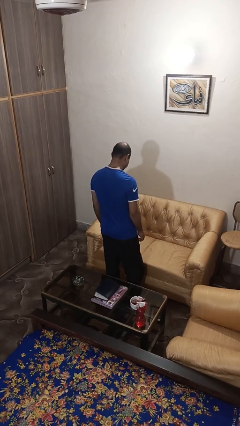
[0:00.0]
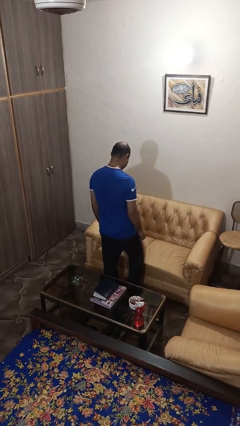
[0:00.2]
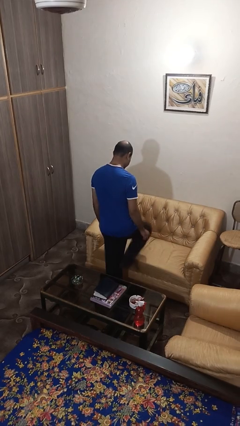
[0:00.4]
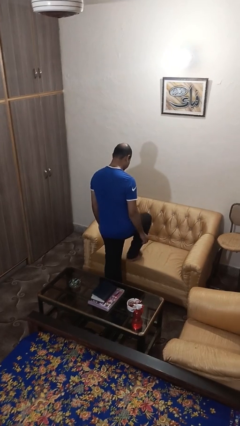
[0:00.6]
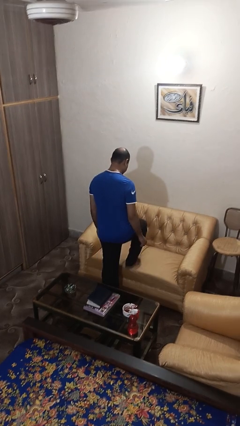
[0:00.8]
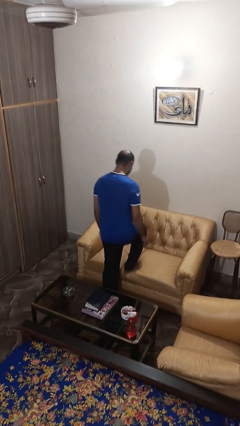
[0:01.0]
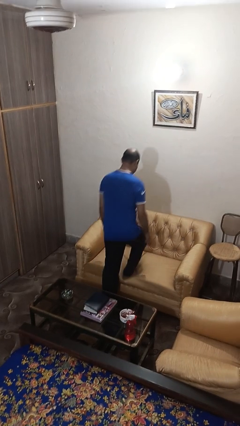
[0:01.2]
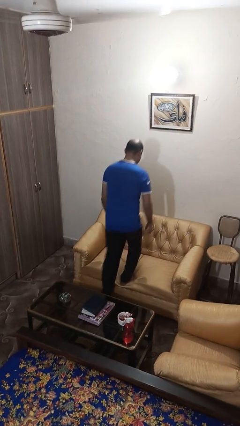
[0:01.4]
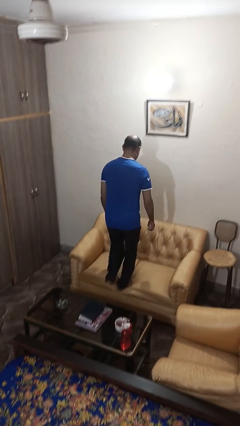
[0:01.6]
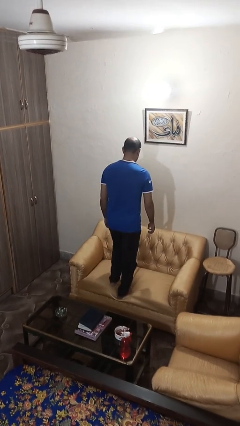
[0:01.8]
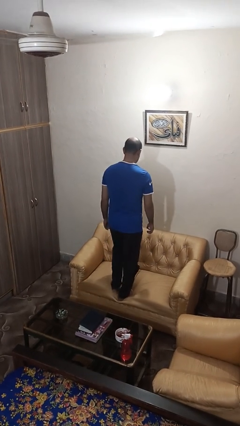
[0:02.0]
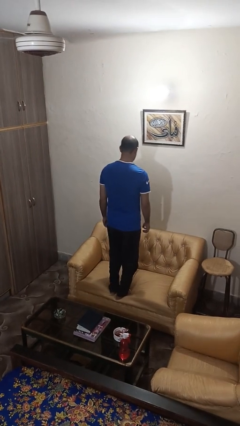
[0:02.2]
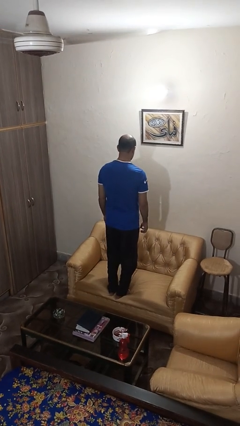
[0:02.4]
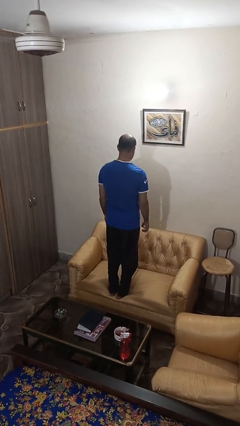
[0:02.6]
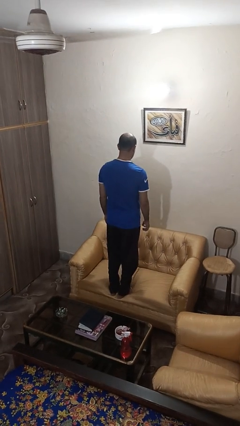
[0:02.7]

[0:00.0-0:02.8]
person climbs on couch

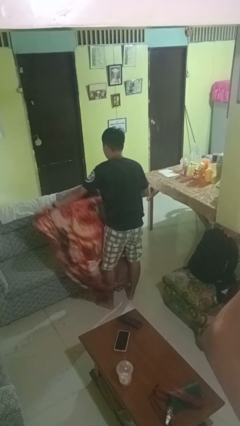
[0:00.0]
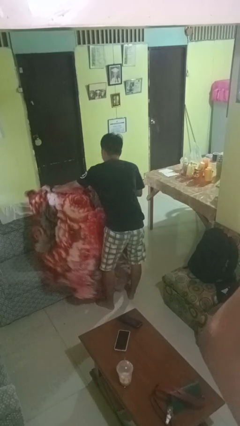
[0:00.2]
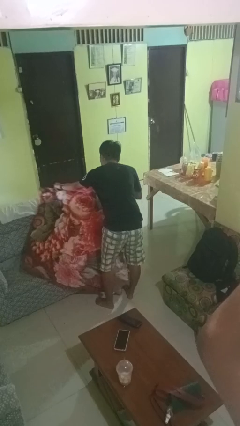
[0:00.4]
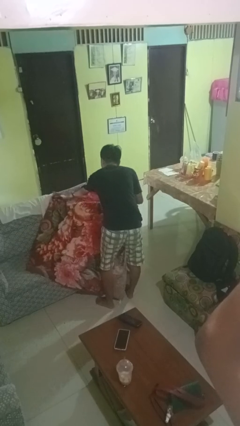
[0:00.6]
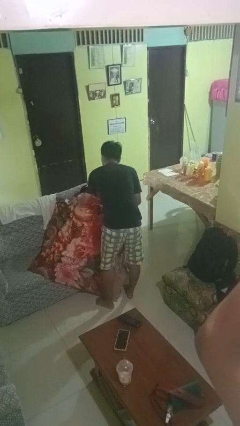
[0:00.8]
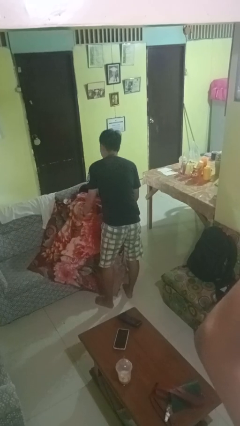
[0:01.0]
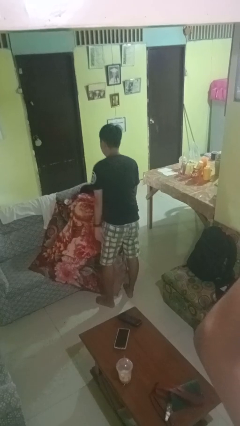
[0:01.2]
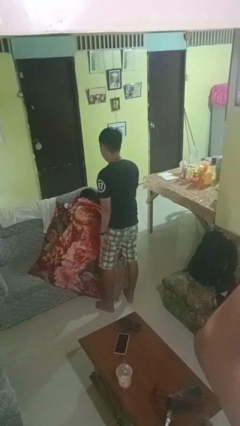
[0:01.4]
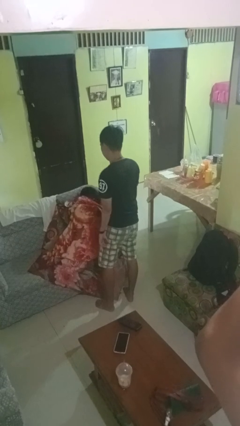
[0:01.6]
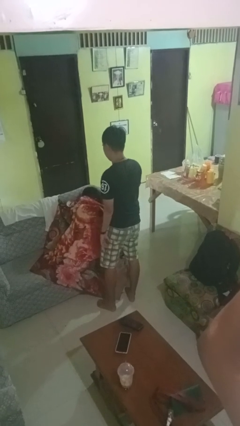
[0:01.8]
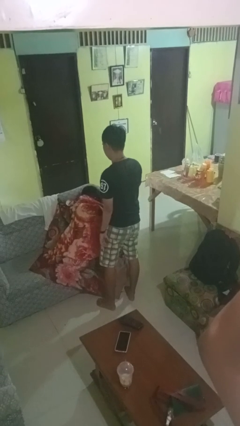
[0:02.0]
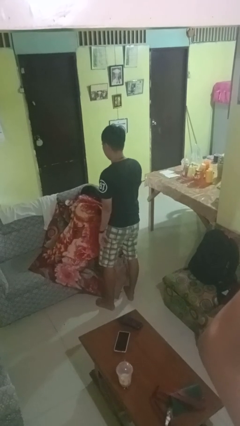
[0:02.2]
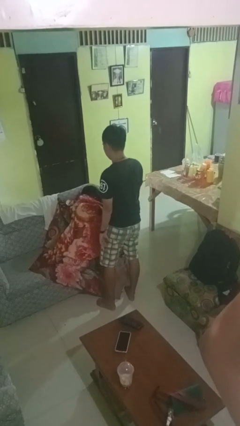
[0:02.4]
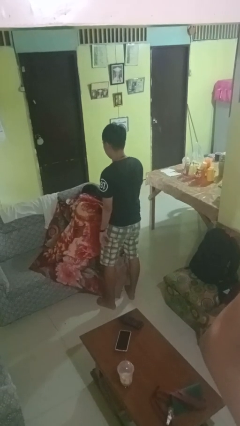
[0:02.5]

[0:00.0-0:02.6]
person covers friend with blanket

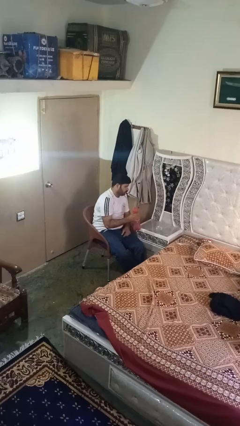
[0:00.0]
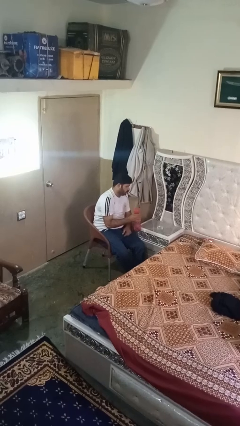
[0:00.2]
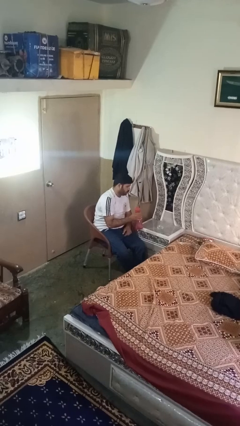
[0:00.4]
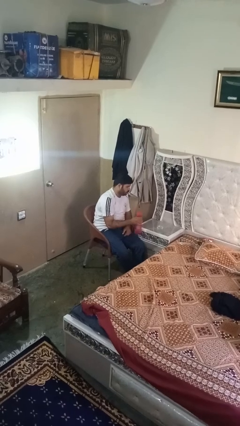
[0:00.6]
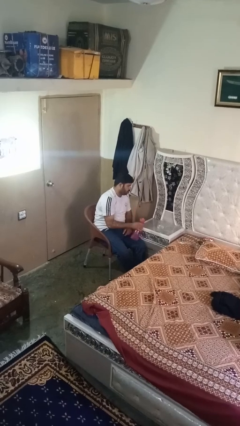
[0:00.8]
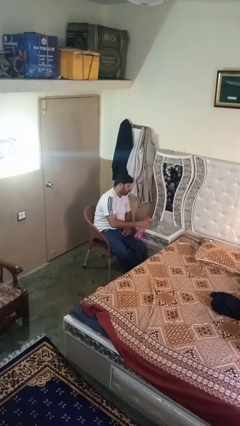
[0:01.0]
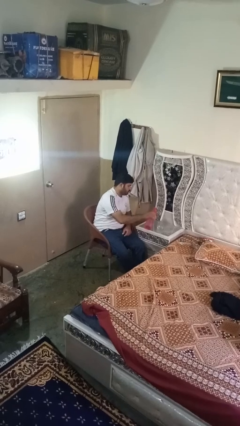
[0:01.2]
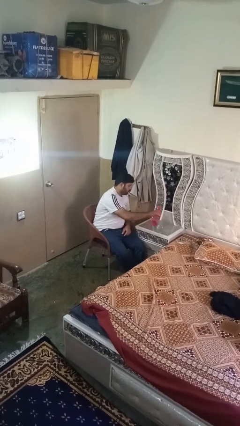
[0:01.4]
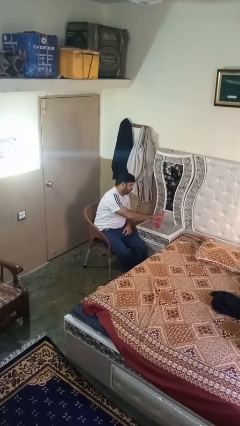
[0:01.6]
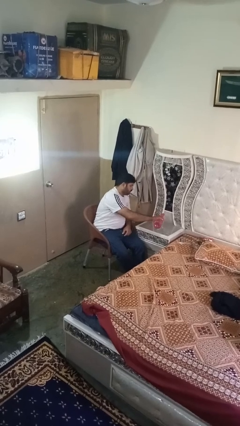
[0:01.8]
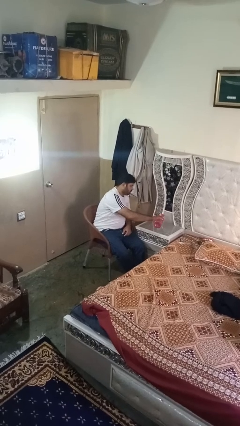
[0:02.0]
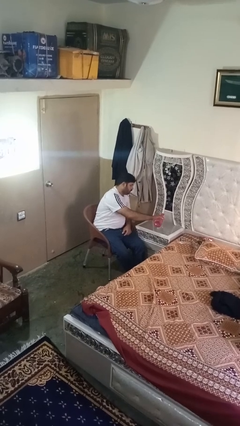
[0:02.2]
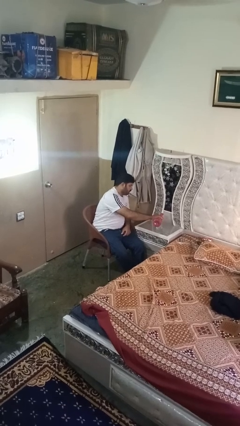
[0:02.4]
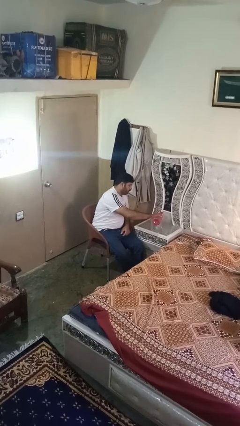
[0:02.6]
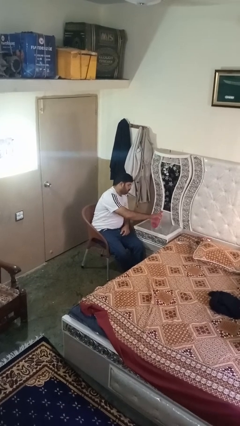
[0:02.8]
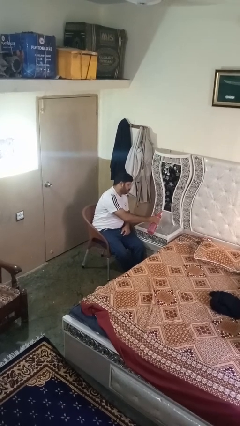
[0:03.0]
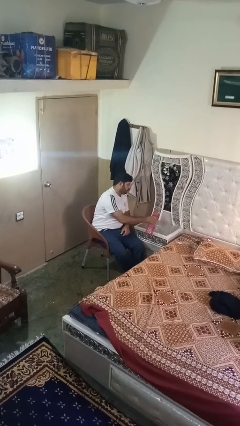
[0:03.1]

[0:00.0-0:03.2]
person pours liquid into cup

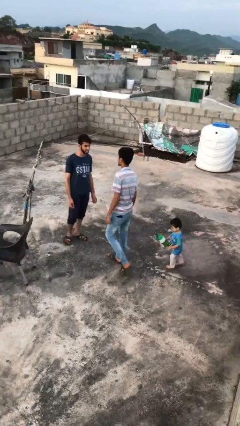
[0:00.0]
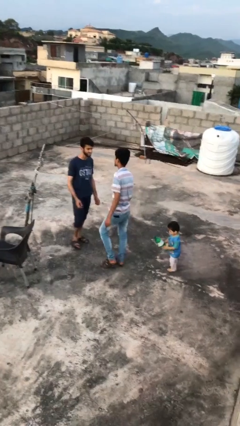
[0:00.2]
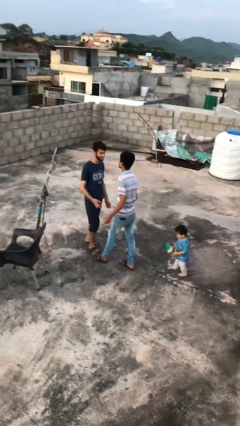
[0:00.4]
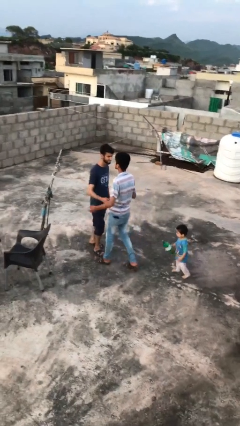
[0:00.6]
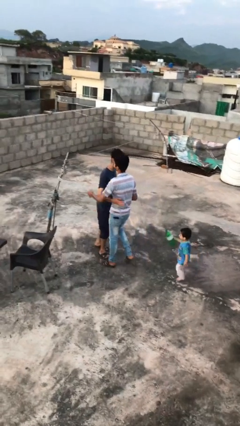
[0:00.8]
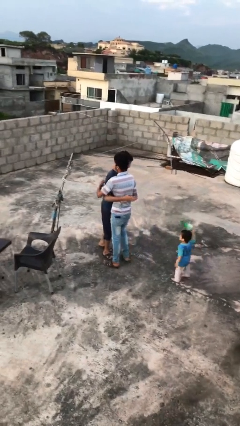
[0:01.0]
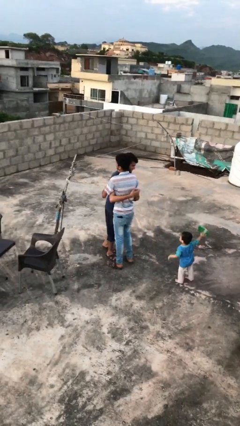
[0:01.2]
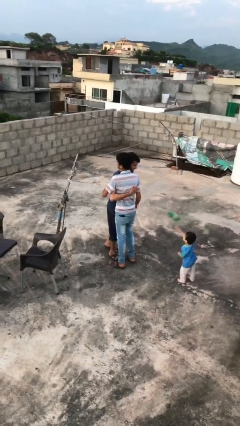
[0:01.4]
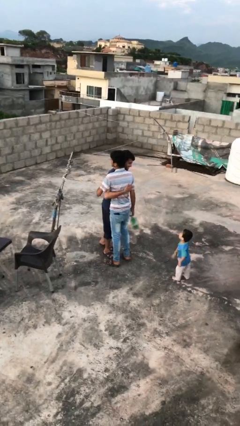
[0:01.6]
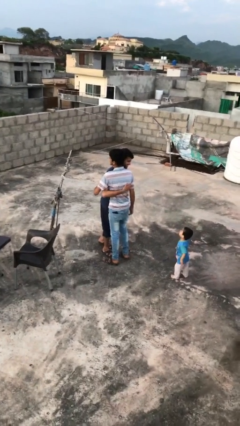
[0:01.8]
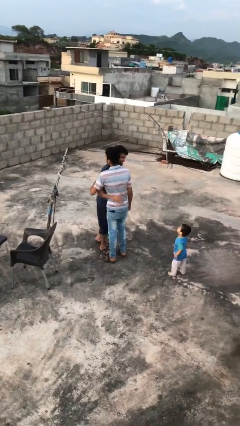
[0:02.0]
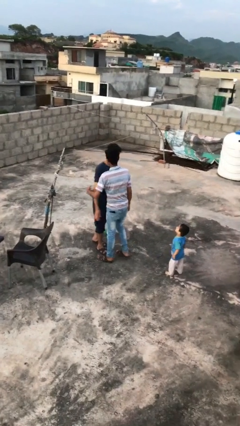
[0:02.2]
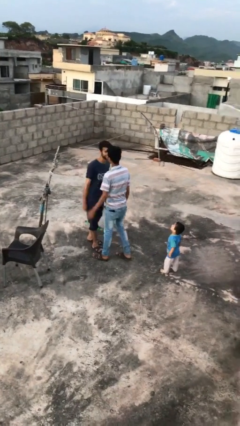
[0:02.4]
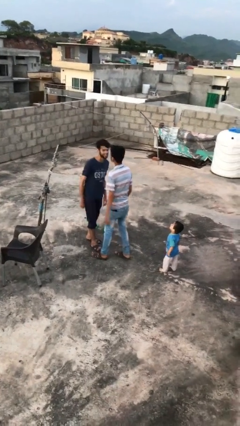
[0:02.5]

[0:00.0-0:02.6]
person embraces person

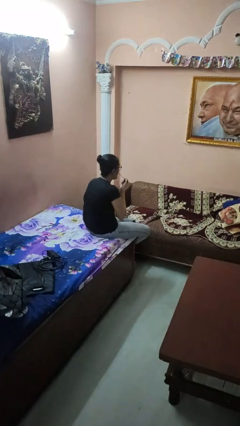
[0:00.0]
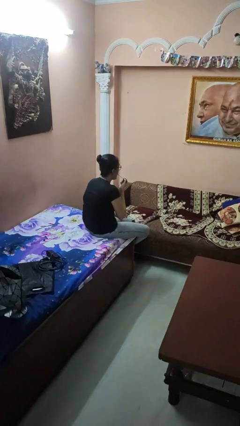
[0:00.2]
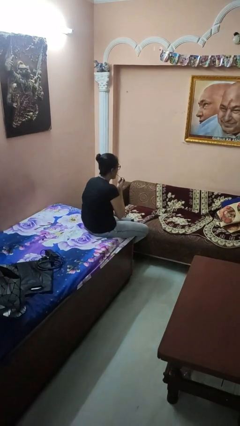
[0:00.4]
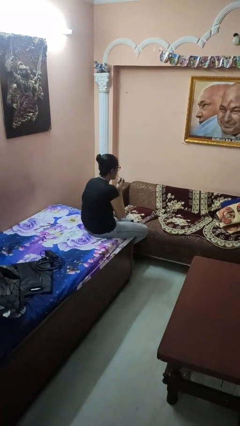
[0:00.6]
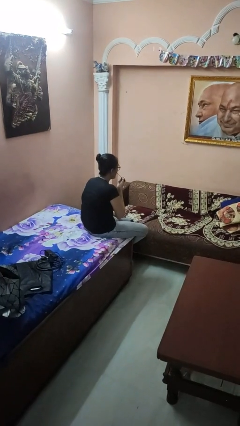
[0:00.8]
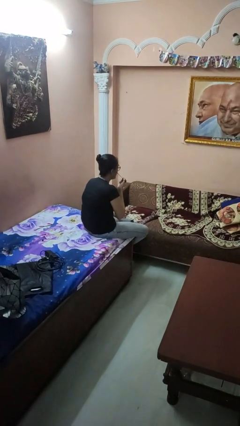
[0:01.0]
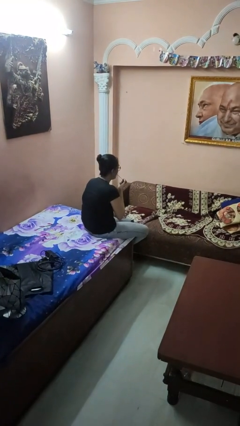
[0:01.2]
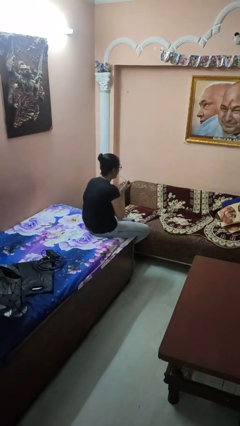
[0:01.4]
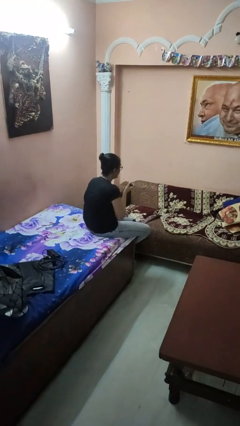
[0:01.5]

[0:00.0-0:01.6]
person applies lip makeup

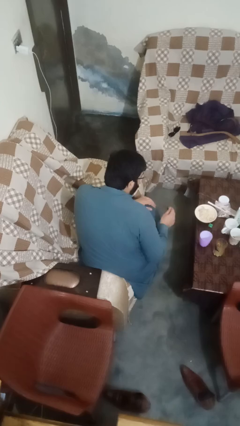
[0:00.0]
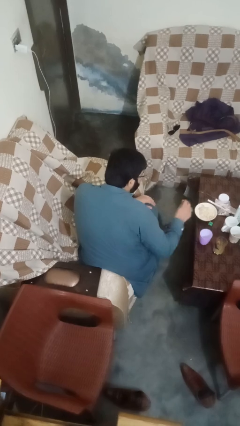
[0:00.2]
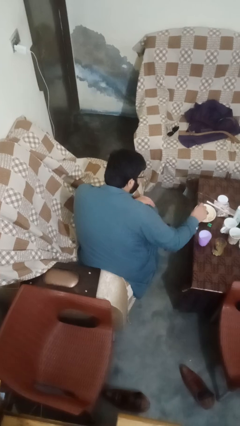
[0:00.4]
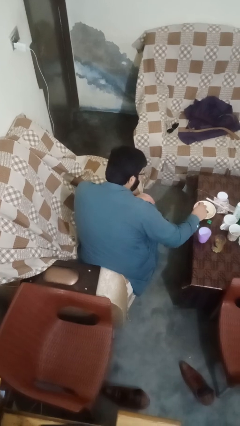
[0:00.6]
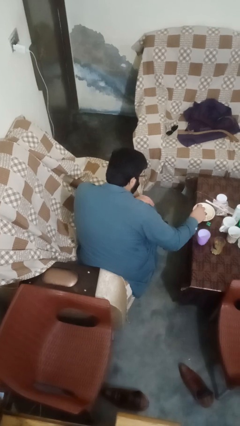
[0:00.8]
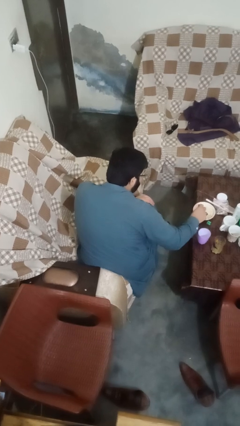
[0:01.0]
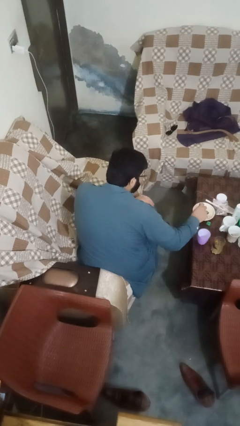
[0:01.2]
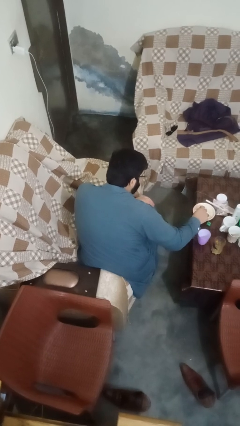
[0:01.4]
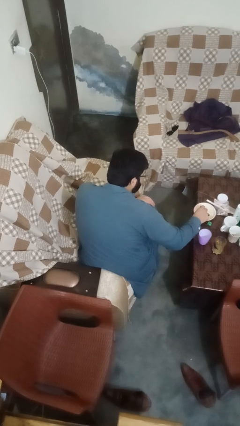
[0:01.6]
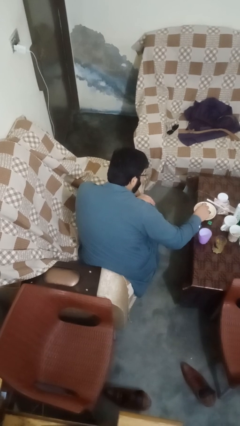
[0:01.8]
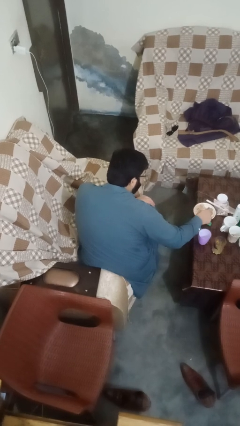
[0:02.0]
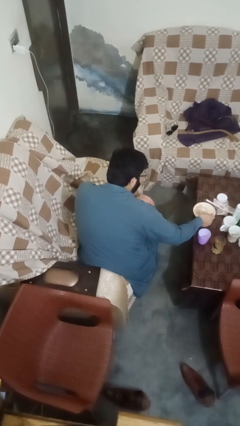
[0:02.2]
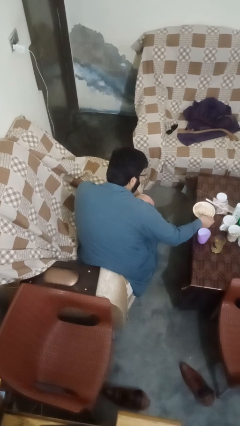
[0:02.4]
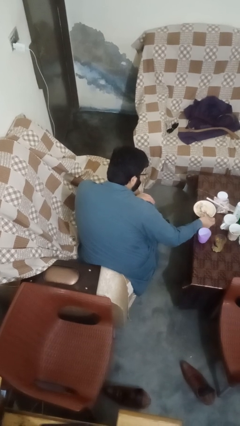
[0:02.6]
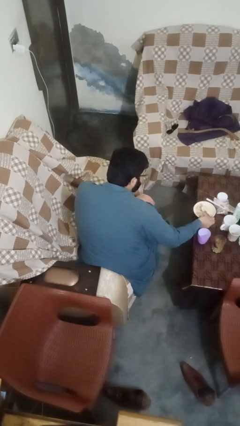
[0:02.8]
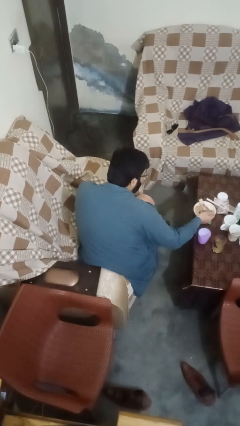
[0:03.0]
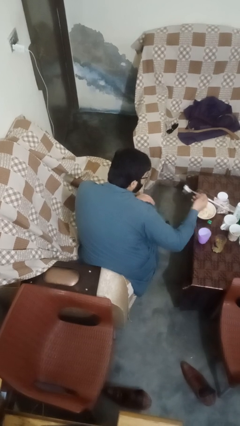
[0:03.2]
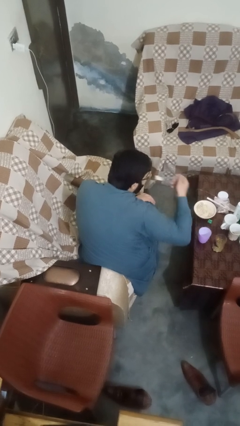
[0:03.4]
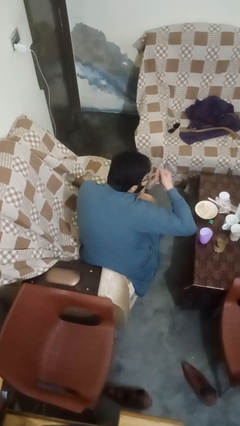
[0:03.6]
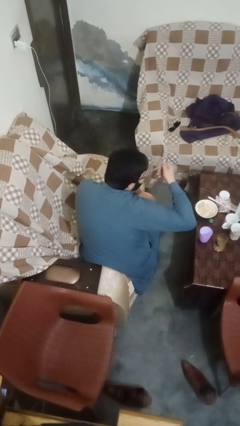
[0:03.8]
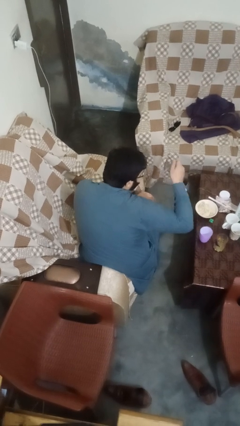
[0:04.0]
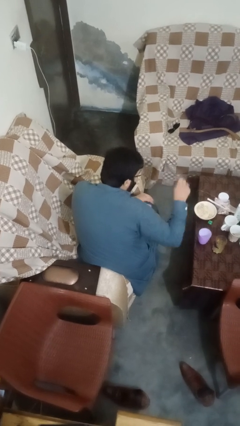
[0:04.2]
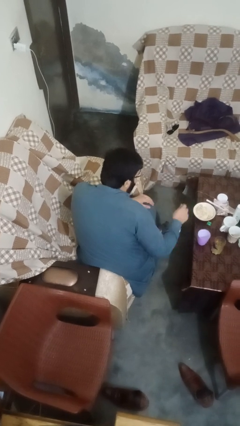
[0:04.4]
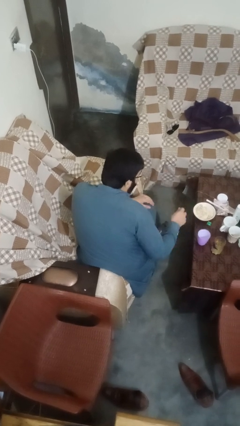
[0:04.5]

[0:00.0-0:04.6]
person eats with utensil
